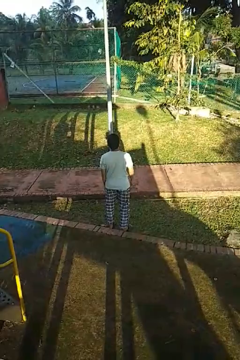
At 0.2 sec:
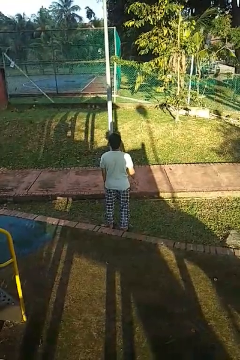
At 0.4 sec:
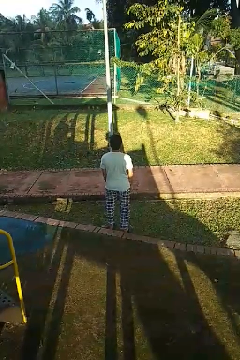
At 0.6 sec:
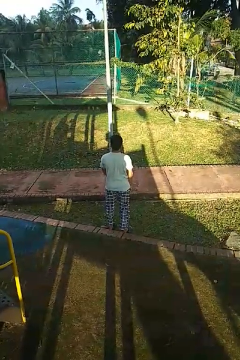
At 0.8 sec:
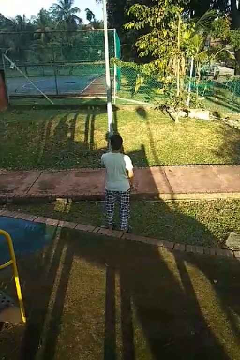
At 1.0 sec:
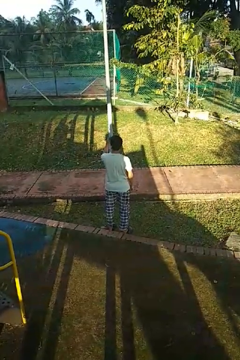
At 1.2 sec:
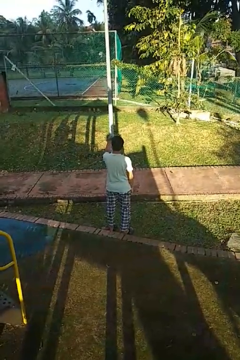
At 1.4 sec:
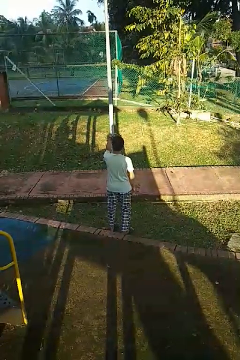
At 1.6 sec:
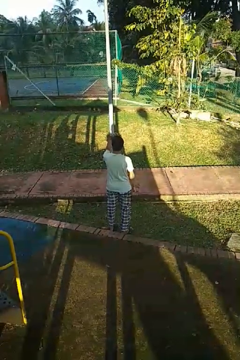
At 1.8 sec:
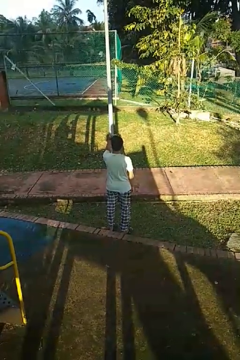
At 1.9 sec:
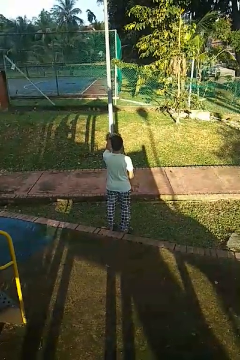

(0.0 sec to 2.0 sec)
person gestures watch closely

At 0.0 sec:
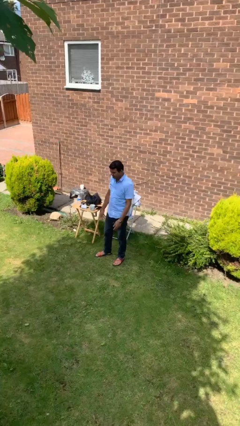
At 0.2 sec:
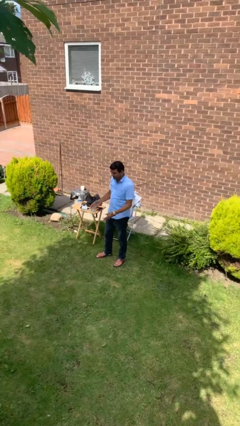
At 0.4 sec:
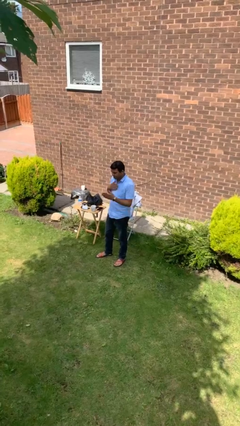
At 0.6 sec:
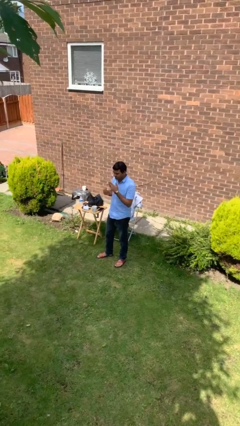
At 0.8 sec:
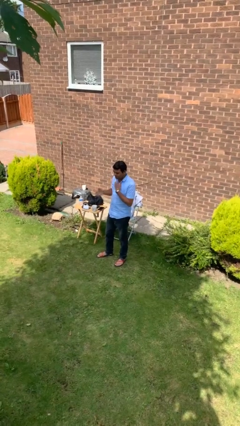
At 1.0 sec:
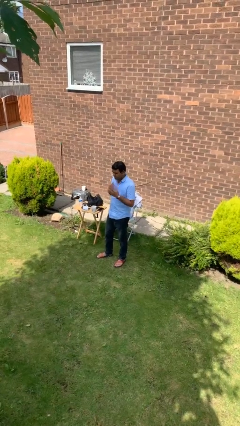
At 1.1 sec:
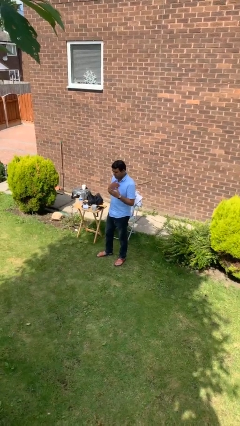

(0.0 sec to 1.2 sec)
person drums on chest

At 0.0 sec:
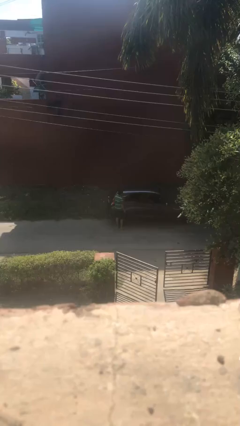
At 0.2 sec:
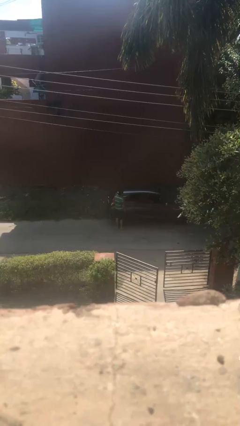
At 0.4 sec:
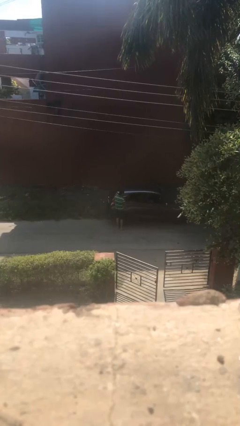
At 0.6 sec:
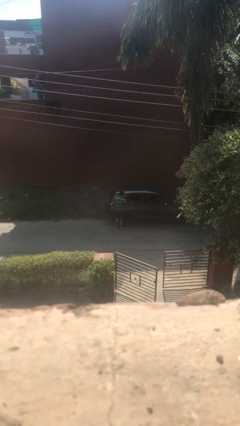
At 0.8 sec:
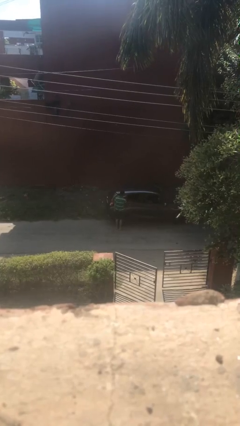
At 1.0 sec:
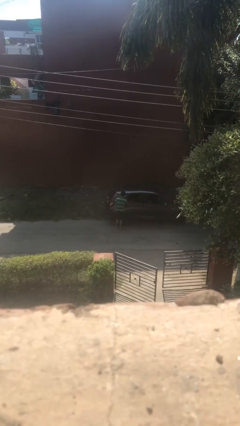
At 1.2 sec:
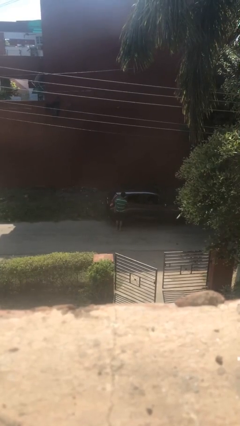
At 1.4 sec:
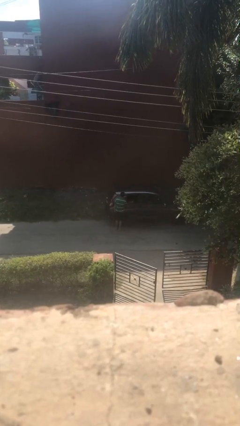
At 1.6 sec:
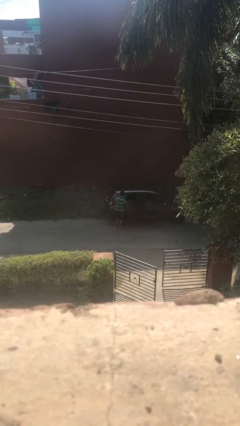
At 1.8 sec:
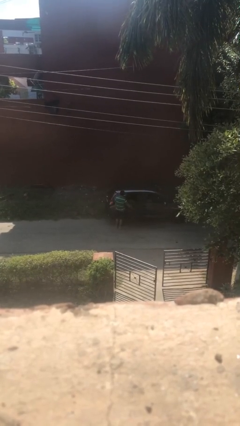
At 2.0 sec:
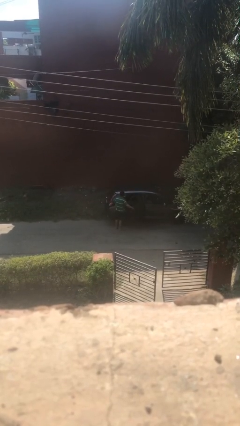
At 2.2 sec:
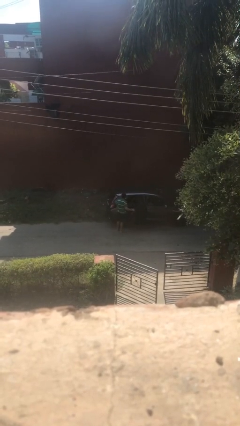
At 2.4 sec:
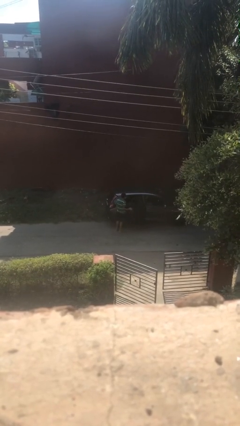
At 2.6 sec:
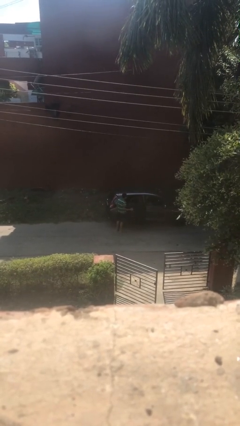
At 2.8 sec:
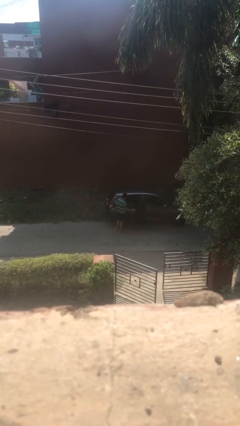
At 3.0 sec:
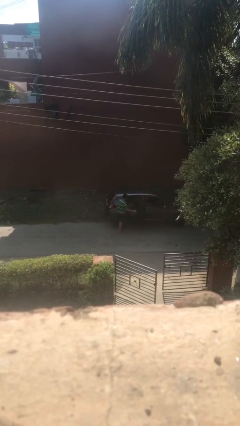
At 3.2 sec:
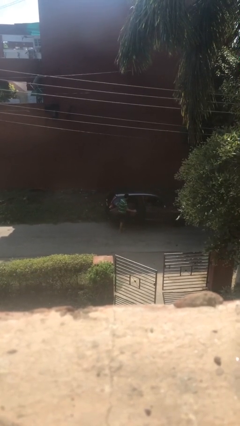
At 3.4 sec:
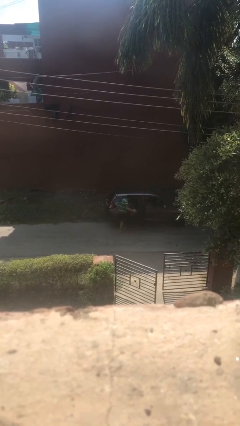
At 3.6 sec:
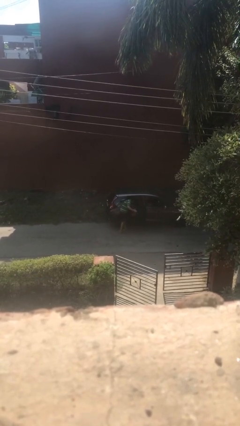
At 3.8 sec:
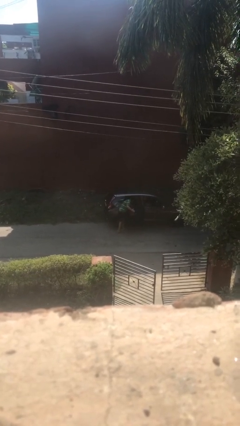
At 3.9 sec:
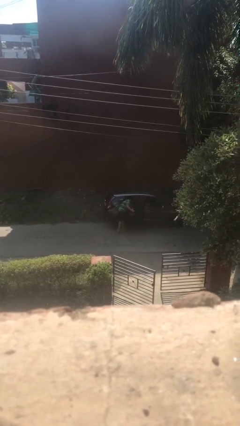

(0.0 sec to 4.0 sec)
person opens car door

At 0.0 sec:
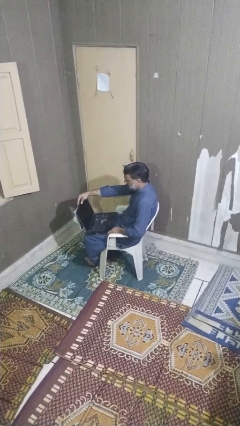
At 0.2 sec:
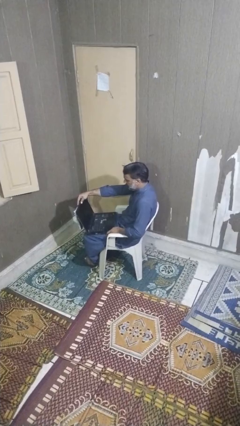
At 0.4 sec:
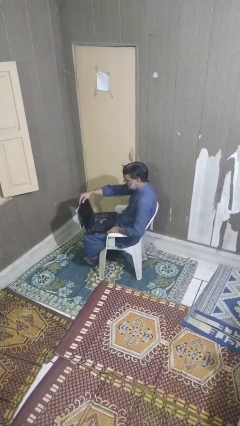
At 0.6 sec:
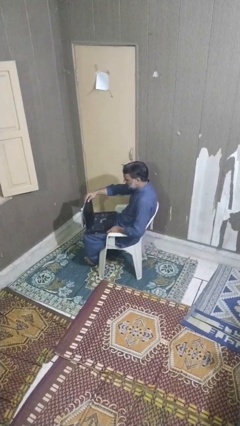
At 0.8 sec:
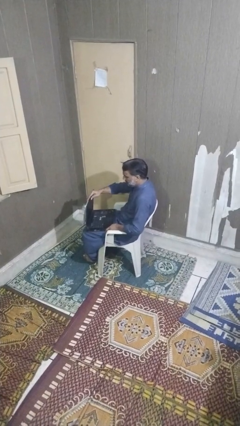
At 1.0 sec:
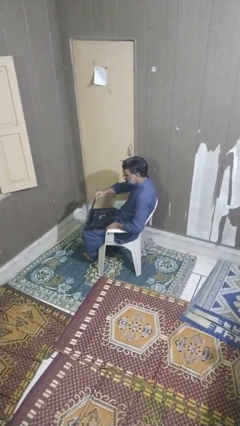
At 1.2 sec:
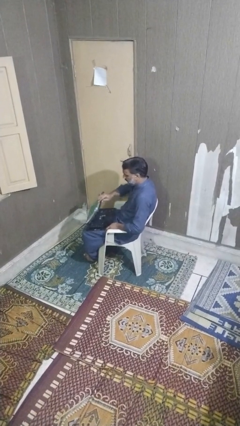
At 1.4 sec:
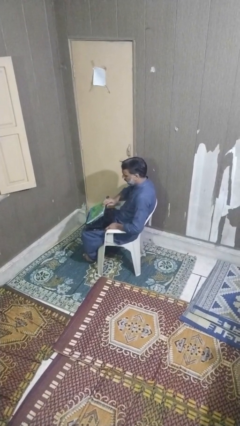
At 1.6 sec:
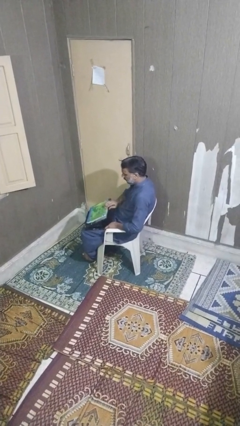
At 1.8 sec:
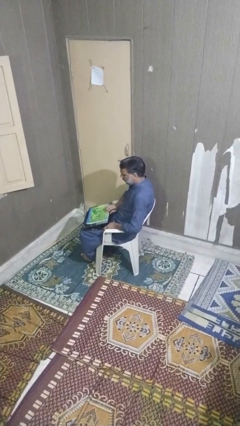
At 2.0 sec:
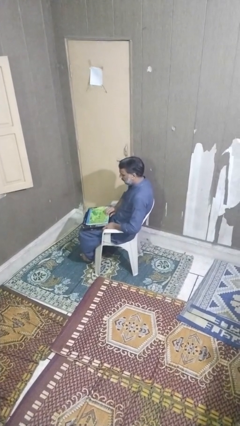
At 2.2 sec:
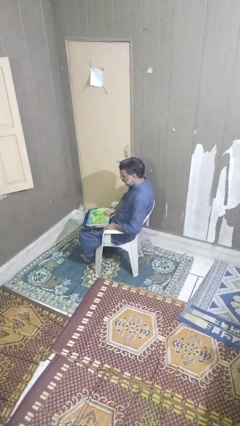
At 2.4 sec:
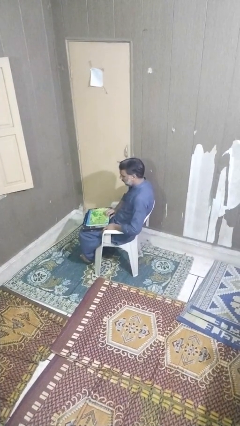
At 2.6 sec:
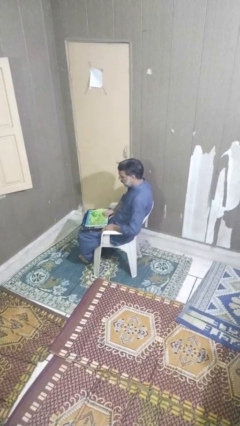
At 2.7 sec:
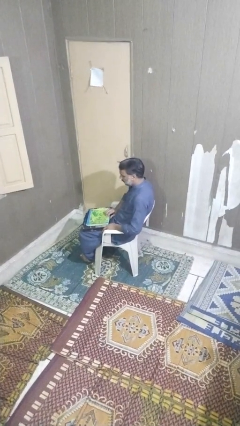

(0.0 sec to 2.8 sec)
person closes laptop

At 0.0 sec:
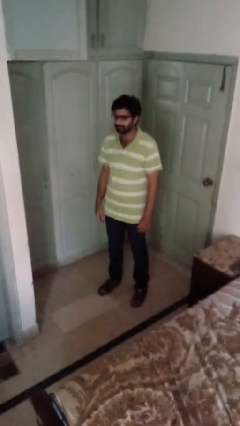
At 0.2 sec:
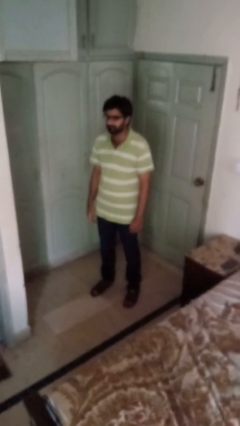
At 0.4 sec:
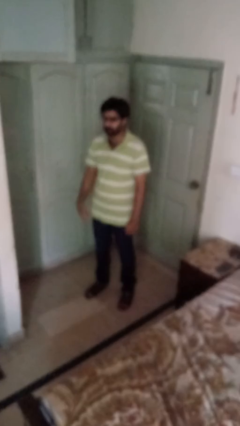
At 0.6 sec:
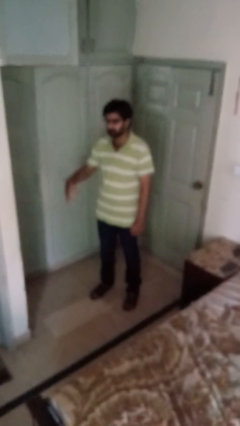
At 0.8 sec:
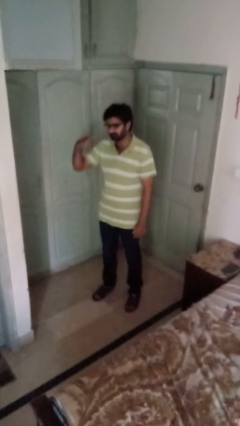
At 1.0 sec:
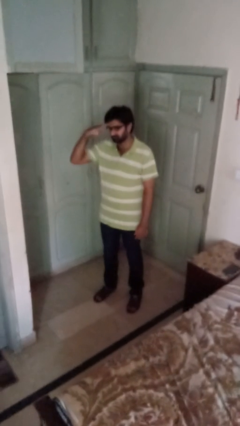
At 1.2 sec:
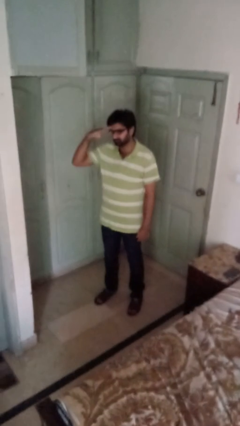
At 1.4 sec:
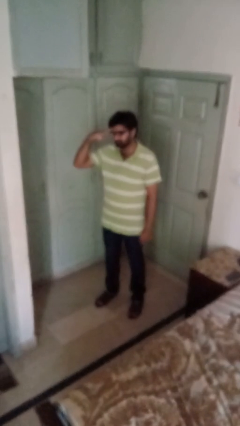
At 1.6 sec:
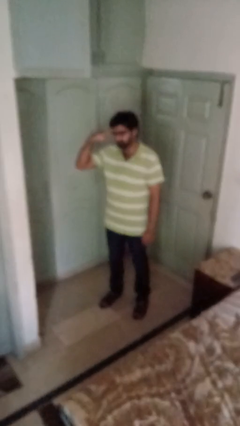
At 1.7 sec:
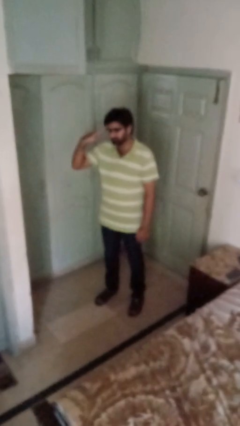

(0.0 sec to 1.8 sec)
person salutes

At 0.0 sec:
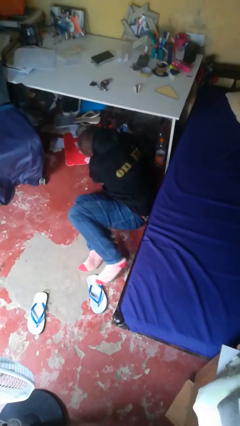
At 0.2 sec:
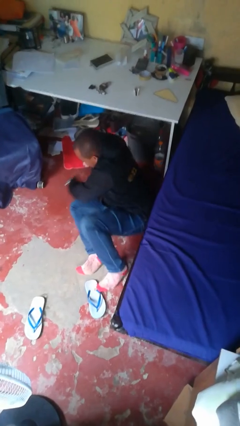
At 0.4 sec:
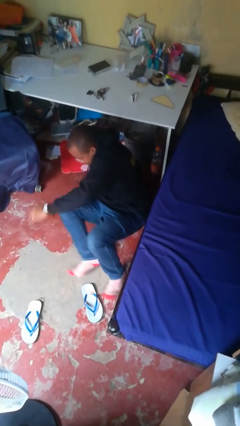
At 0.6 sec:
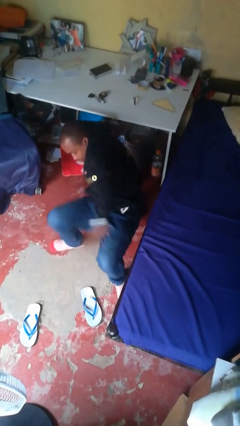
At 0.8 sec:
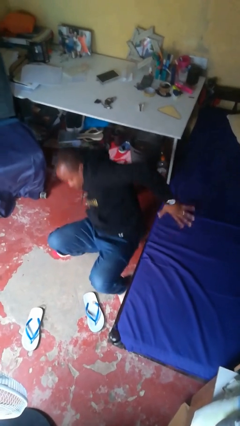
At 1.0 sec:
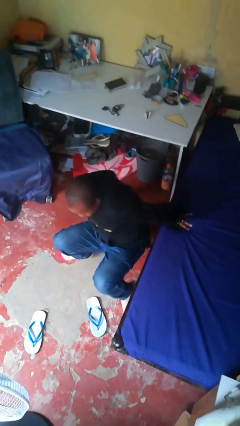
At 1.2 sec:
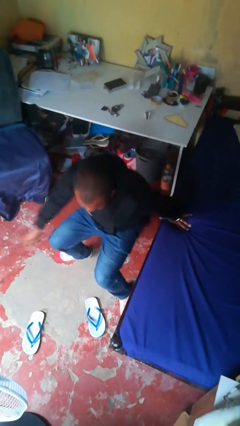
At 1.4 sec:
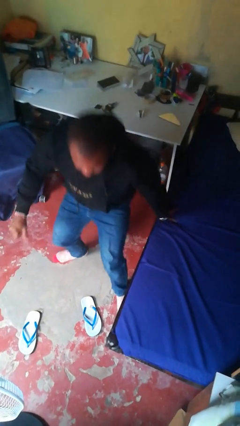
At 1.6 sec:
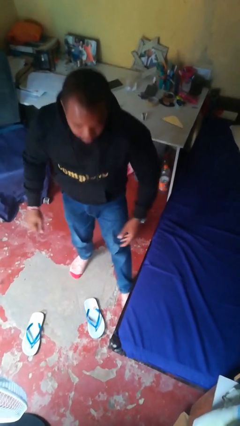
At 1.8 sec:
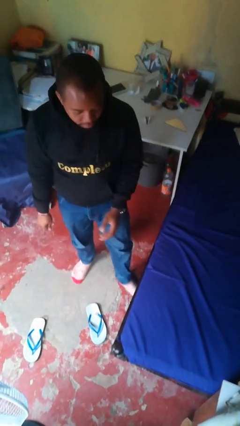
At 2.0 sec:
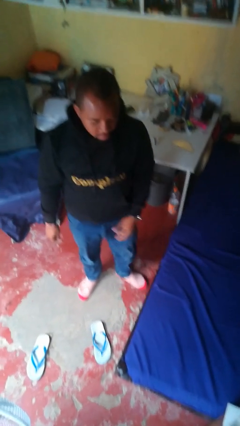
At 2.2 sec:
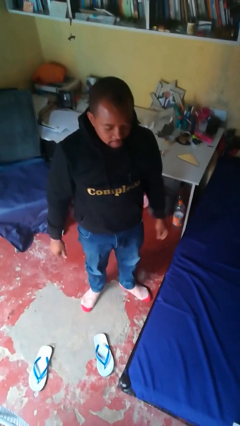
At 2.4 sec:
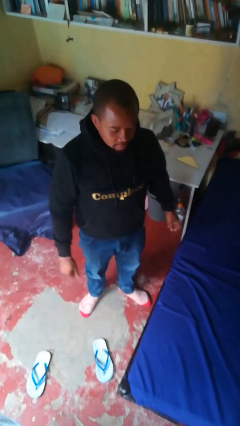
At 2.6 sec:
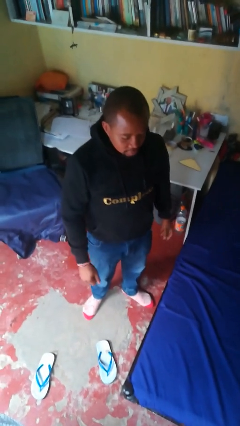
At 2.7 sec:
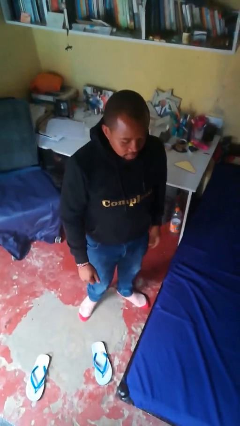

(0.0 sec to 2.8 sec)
person stands up from floor

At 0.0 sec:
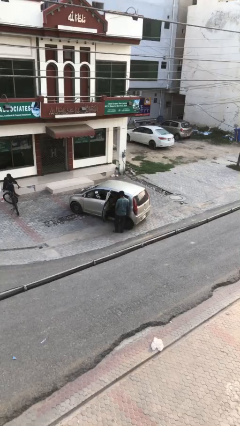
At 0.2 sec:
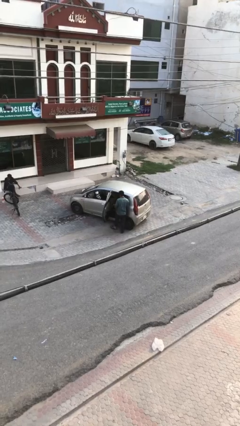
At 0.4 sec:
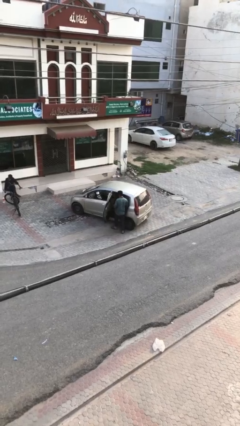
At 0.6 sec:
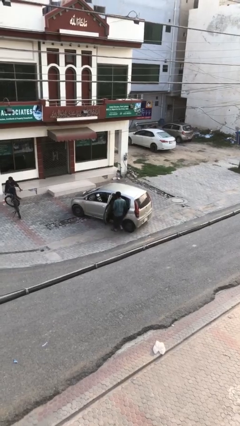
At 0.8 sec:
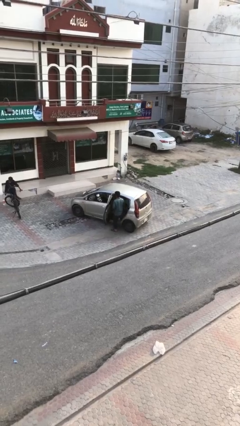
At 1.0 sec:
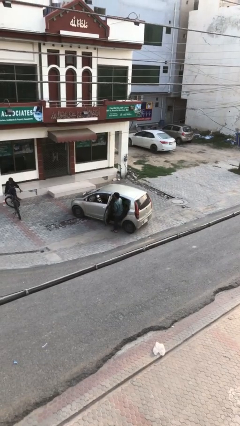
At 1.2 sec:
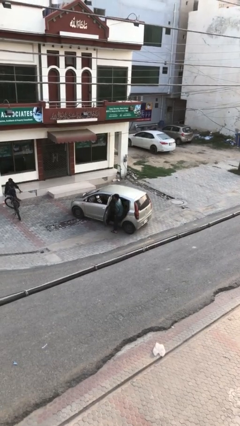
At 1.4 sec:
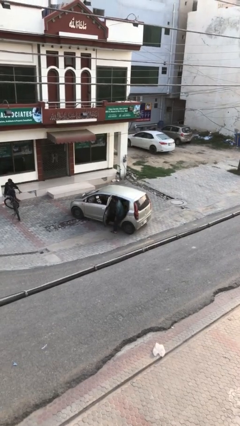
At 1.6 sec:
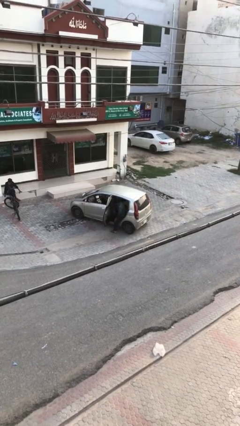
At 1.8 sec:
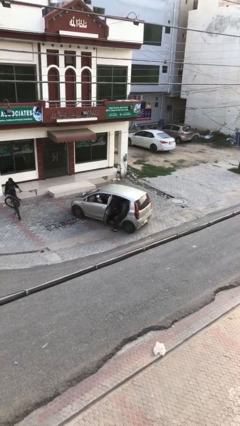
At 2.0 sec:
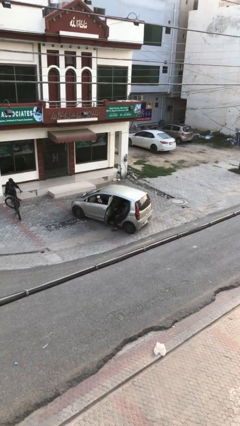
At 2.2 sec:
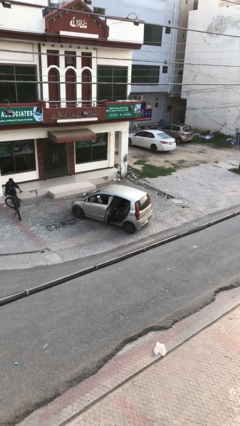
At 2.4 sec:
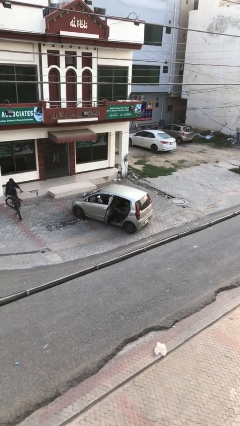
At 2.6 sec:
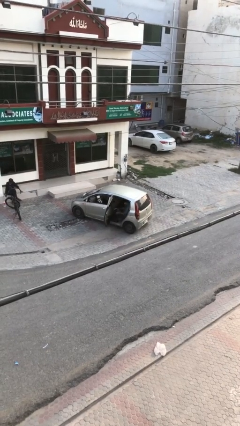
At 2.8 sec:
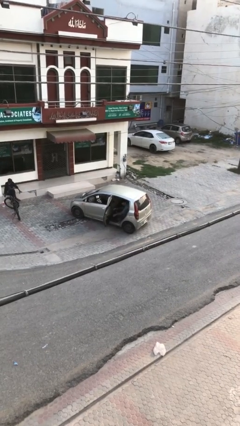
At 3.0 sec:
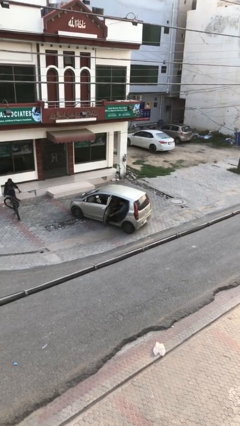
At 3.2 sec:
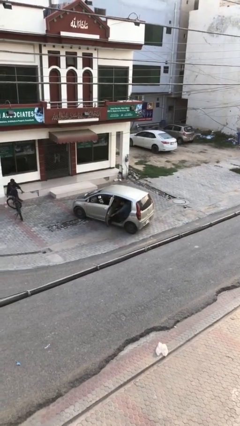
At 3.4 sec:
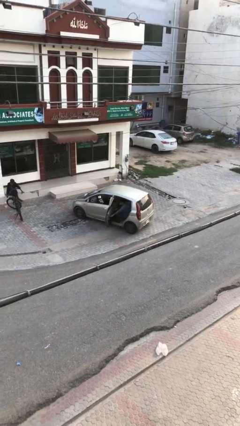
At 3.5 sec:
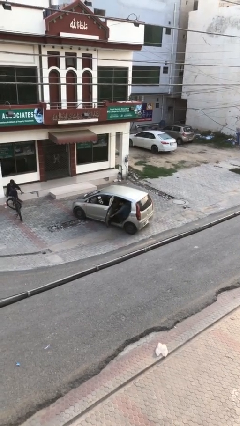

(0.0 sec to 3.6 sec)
person enters car
